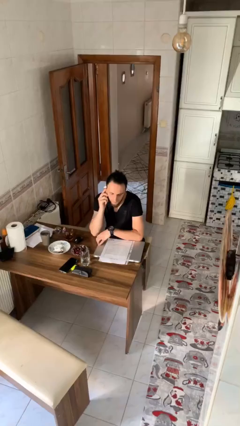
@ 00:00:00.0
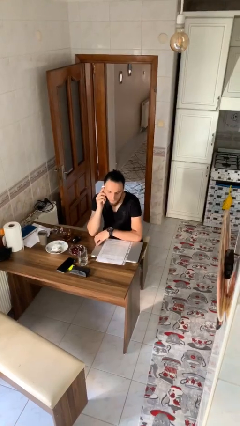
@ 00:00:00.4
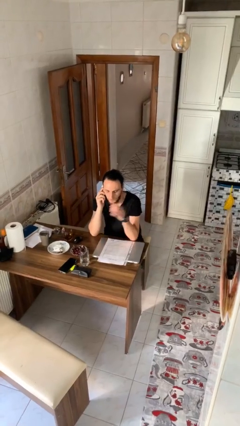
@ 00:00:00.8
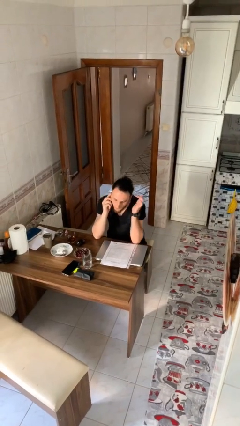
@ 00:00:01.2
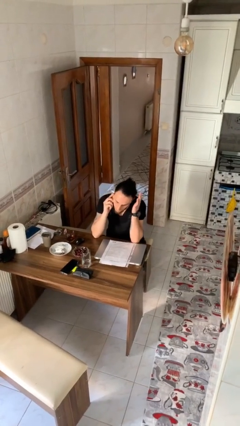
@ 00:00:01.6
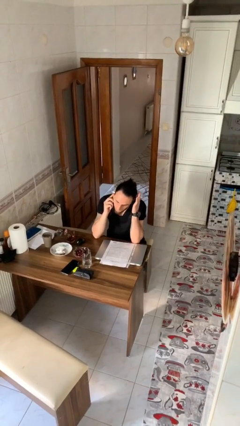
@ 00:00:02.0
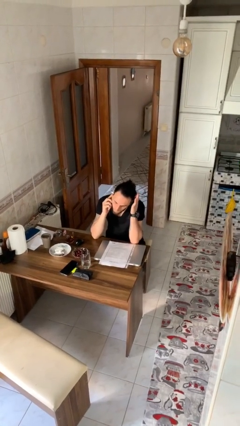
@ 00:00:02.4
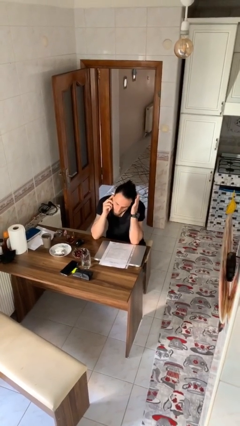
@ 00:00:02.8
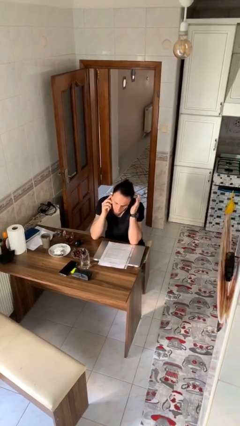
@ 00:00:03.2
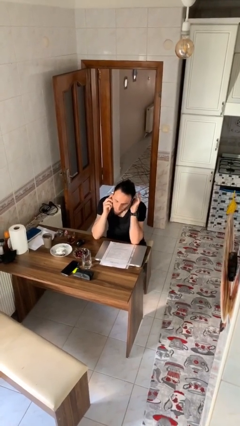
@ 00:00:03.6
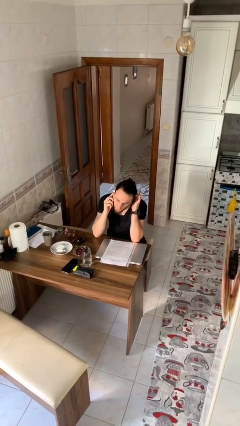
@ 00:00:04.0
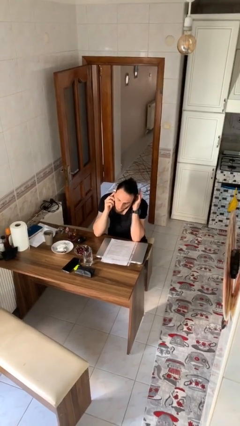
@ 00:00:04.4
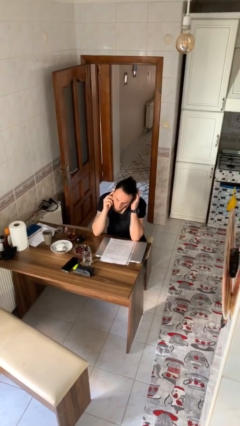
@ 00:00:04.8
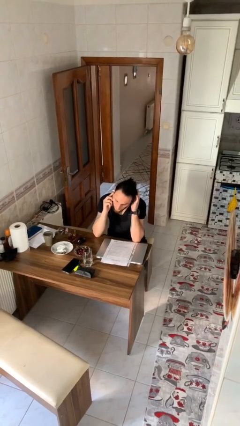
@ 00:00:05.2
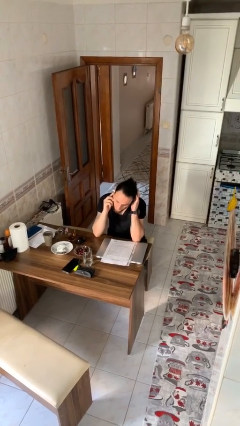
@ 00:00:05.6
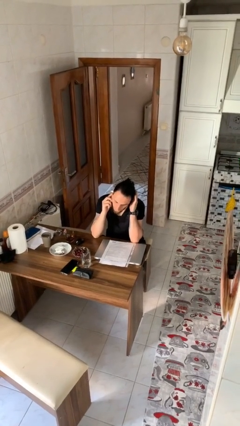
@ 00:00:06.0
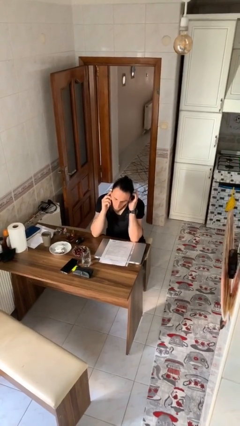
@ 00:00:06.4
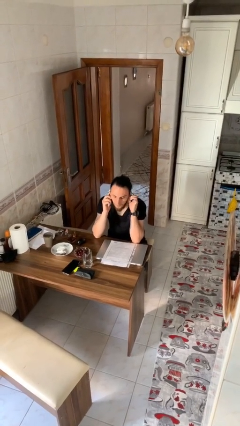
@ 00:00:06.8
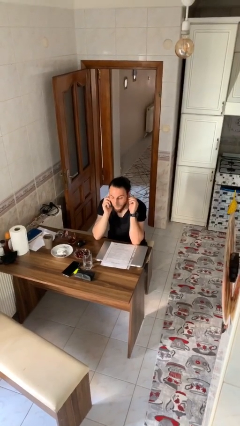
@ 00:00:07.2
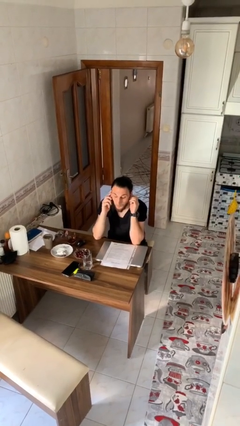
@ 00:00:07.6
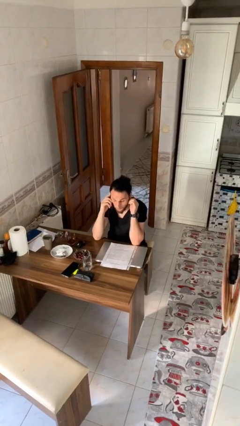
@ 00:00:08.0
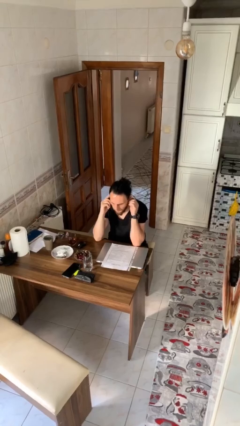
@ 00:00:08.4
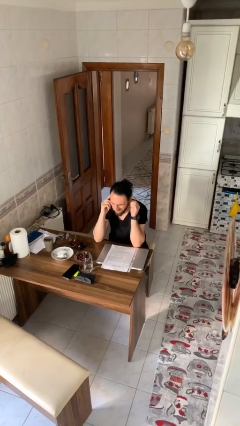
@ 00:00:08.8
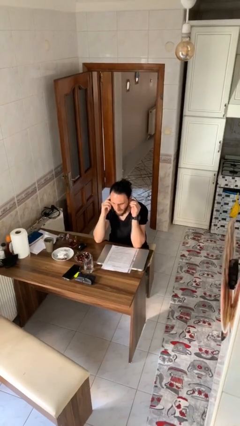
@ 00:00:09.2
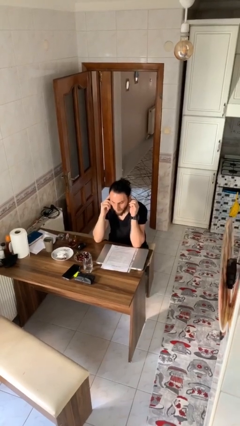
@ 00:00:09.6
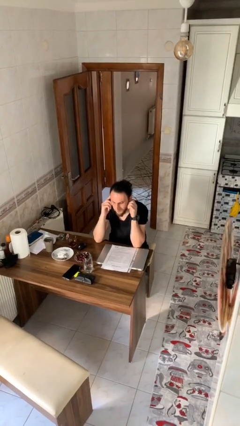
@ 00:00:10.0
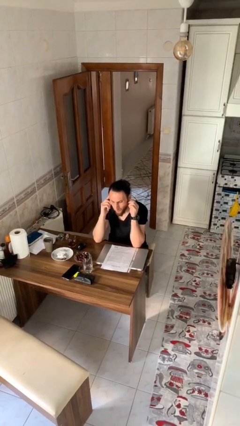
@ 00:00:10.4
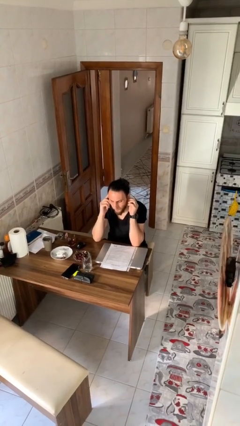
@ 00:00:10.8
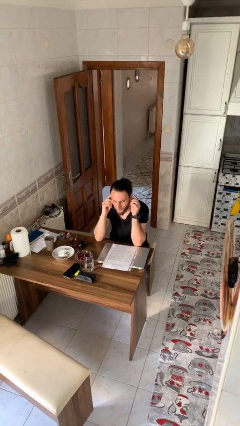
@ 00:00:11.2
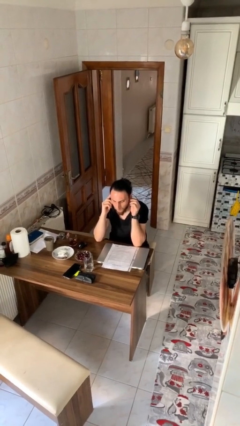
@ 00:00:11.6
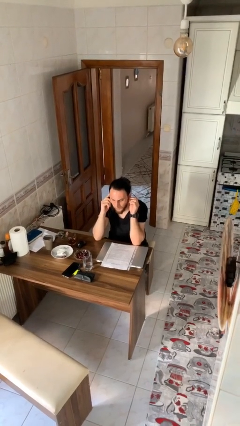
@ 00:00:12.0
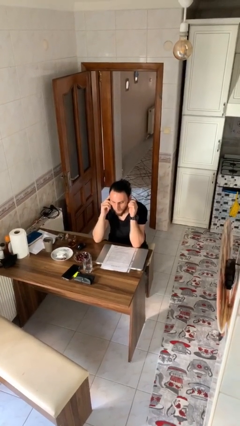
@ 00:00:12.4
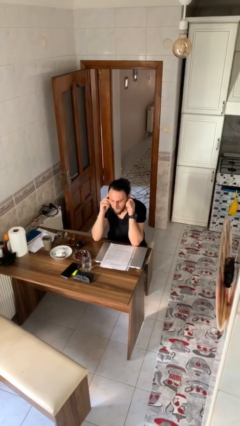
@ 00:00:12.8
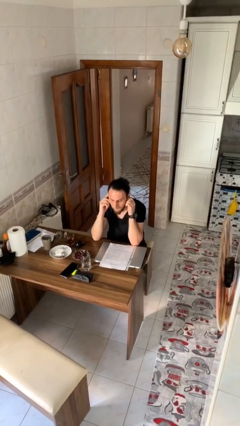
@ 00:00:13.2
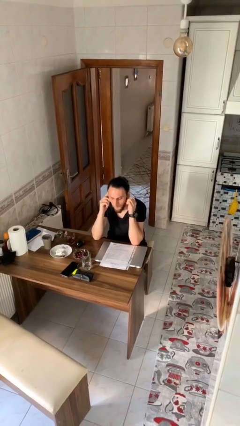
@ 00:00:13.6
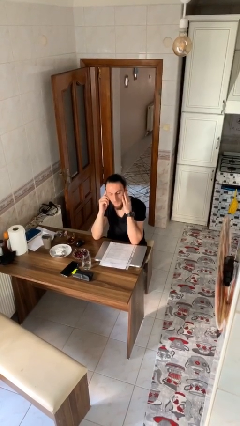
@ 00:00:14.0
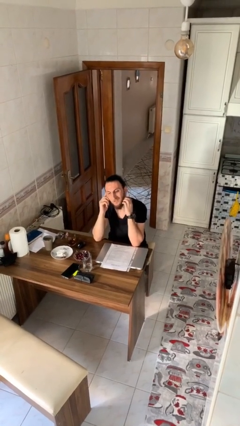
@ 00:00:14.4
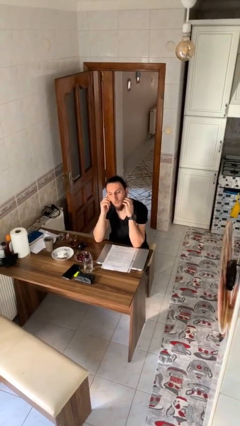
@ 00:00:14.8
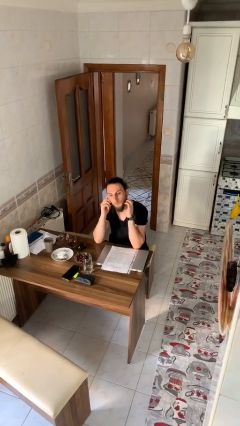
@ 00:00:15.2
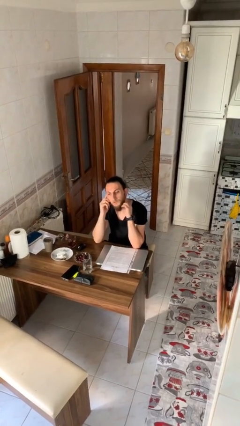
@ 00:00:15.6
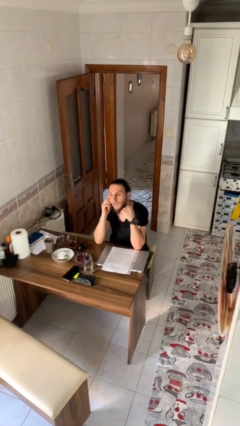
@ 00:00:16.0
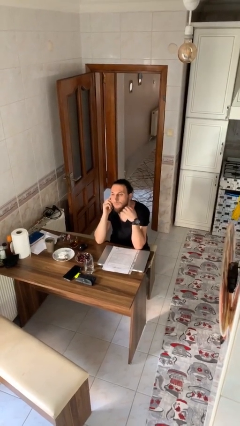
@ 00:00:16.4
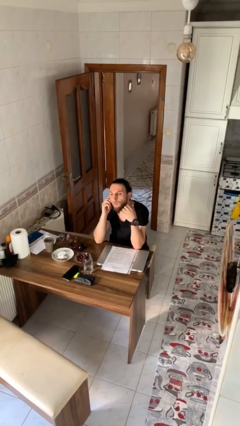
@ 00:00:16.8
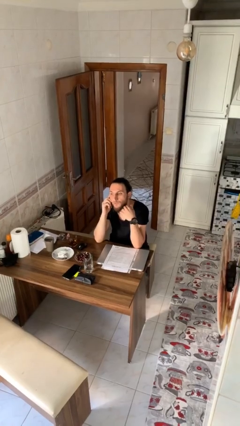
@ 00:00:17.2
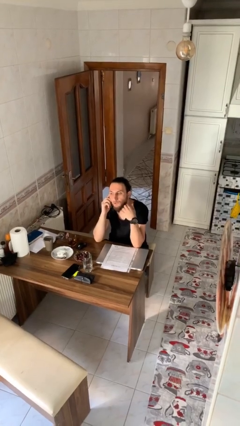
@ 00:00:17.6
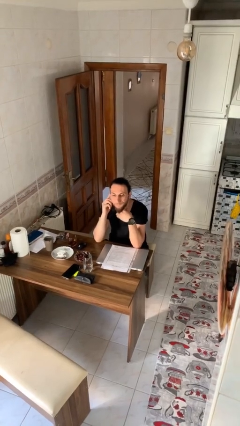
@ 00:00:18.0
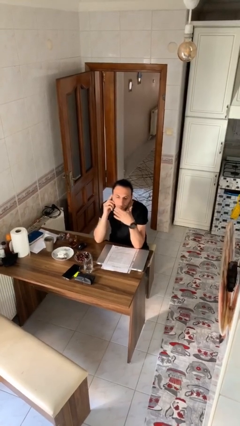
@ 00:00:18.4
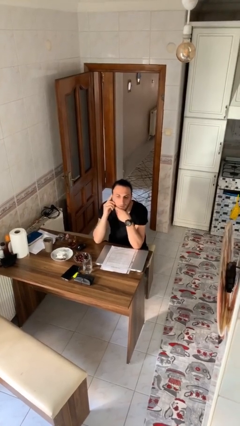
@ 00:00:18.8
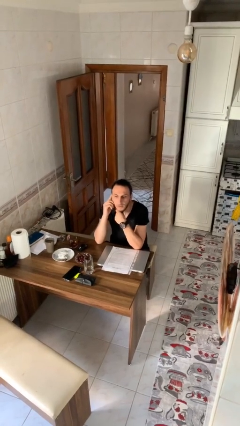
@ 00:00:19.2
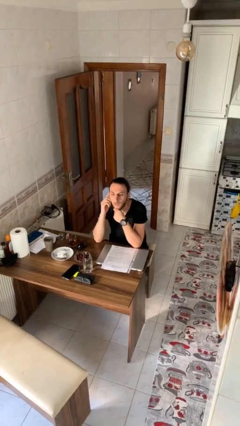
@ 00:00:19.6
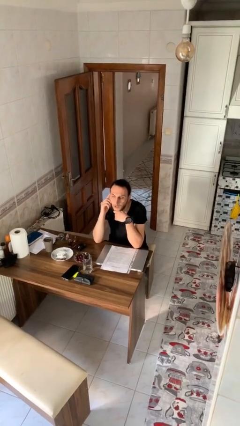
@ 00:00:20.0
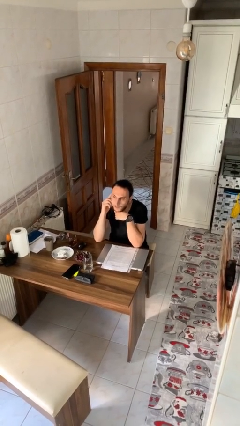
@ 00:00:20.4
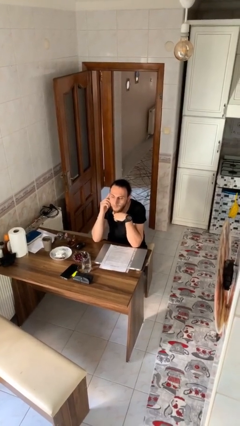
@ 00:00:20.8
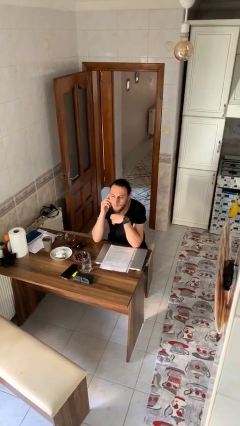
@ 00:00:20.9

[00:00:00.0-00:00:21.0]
person talks on phone

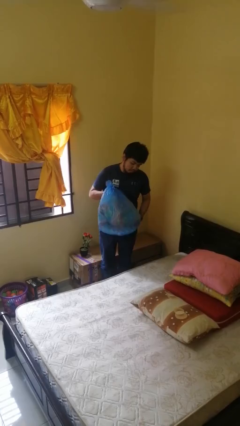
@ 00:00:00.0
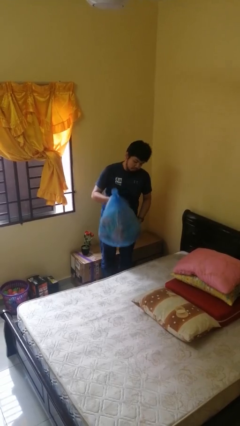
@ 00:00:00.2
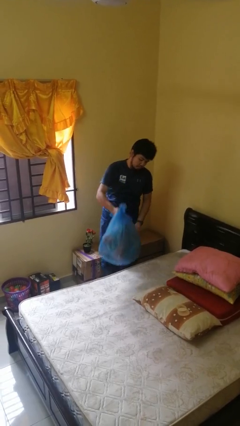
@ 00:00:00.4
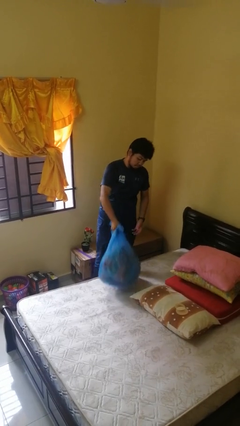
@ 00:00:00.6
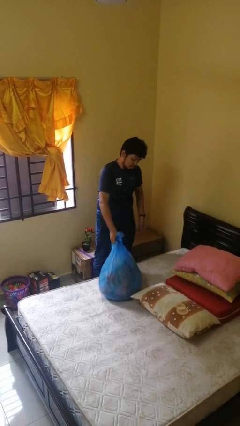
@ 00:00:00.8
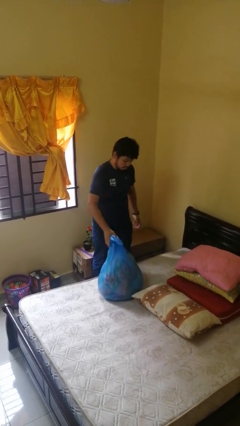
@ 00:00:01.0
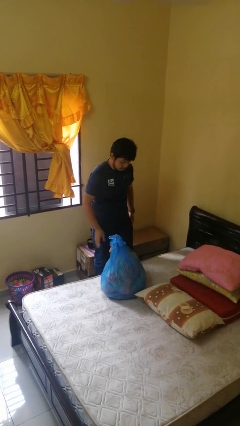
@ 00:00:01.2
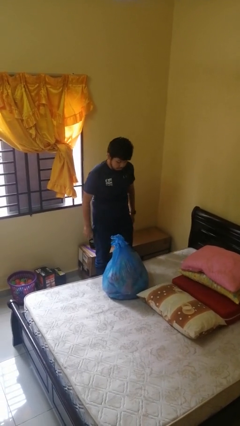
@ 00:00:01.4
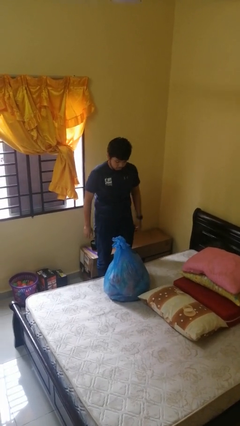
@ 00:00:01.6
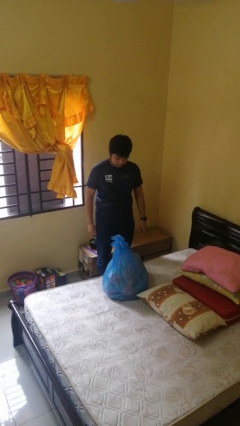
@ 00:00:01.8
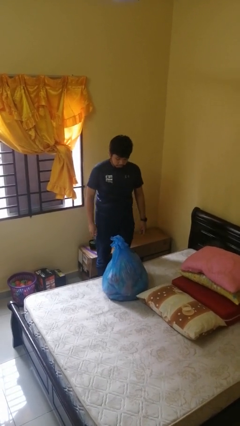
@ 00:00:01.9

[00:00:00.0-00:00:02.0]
person puts down object on bed

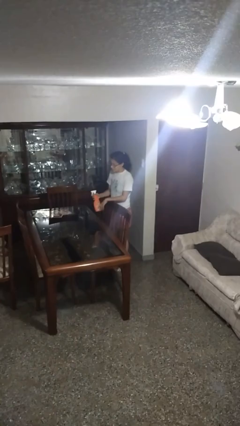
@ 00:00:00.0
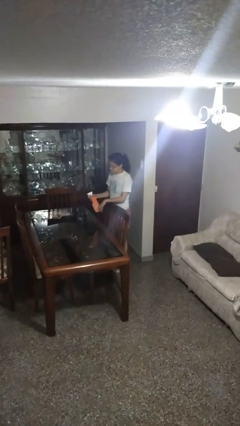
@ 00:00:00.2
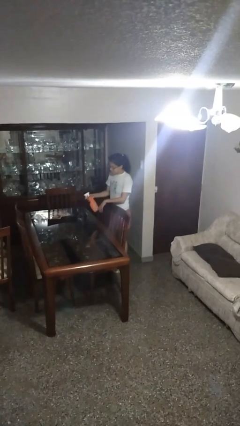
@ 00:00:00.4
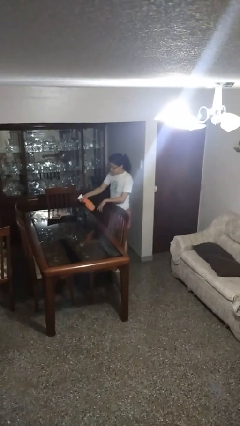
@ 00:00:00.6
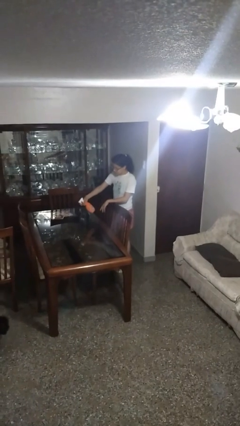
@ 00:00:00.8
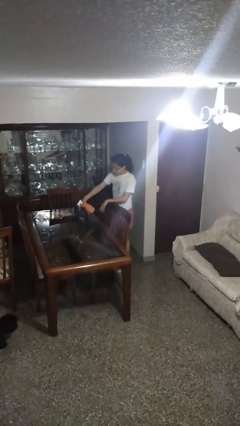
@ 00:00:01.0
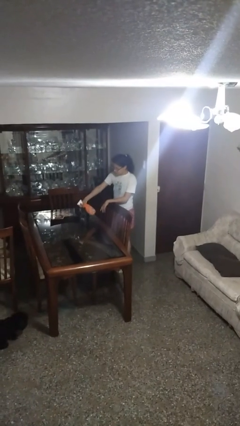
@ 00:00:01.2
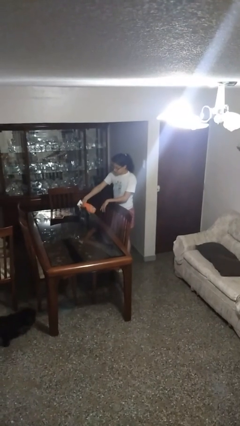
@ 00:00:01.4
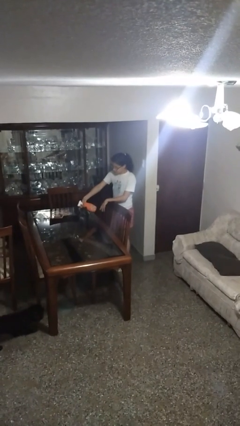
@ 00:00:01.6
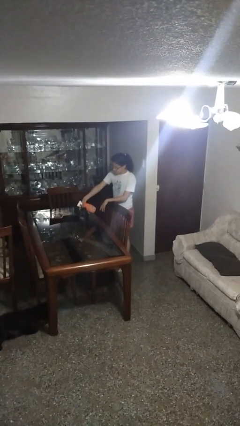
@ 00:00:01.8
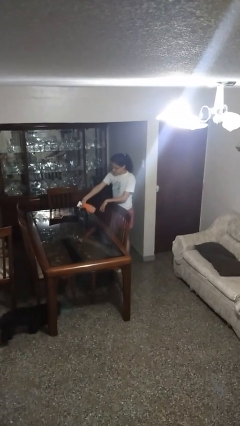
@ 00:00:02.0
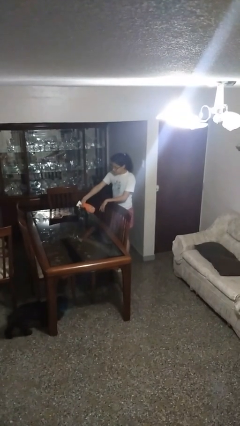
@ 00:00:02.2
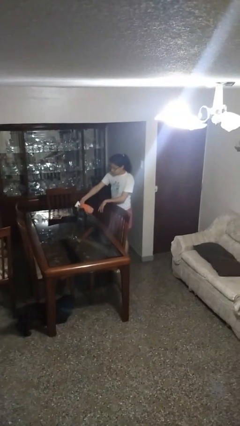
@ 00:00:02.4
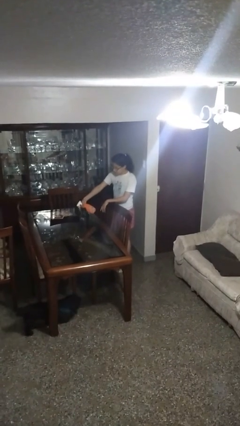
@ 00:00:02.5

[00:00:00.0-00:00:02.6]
person sprays from bottle

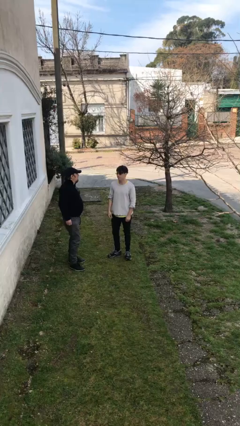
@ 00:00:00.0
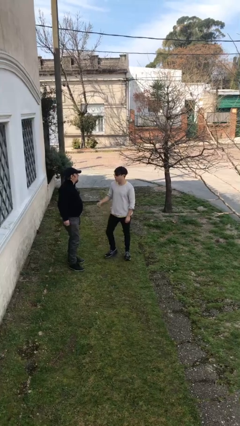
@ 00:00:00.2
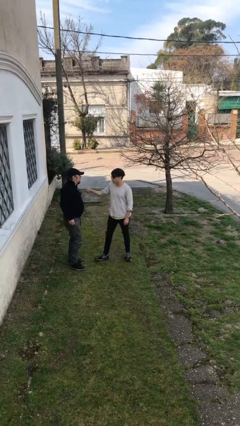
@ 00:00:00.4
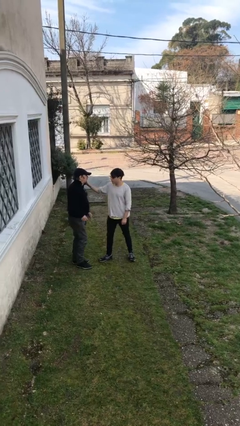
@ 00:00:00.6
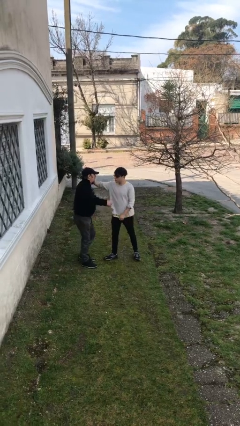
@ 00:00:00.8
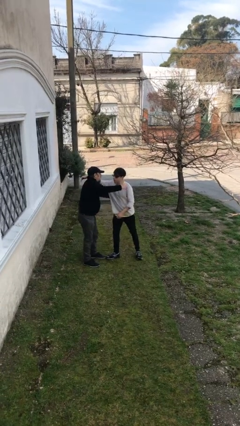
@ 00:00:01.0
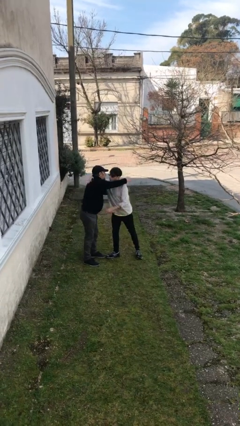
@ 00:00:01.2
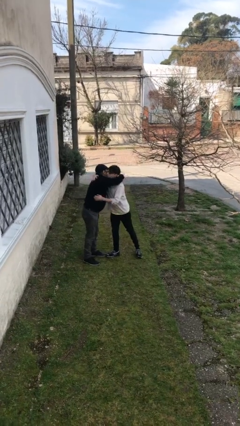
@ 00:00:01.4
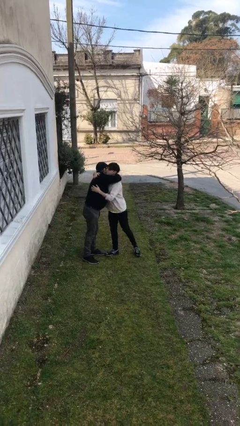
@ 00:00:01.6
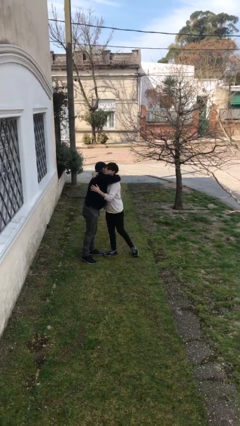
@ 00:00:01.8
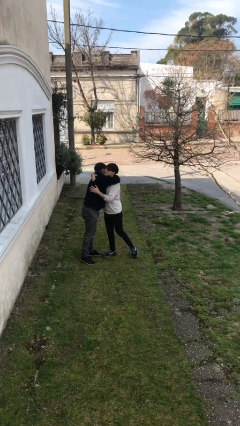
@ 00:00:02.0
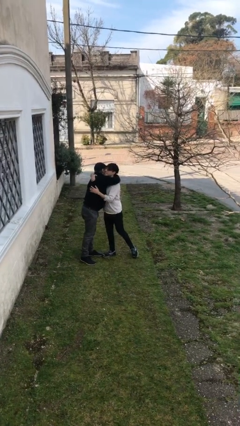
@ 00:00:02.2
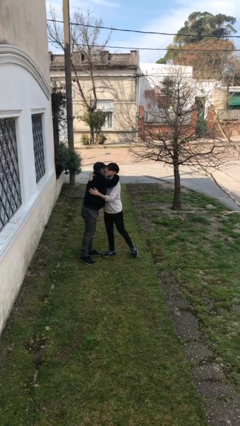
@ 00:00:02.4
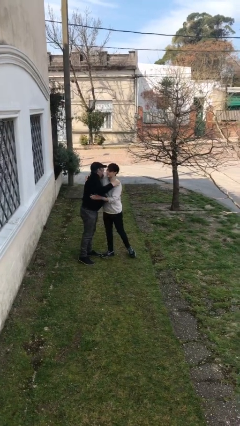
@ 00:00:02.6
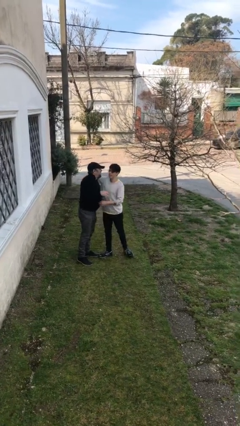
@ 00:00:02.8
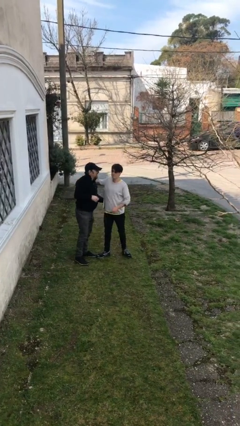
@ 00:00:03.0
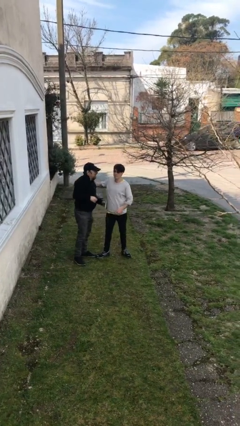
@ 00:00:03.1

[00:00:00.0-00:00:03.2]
person embraces person
